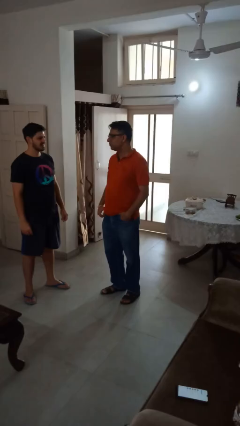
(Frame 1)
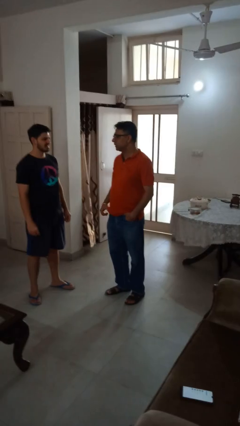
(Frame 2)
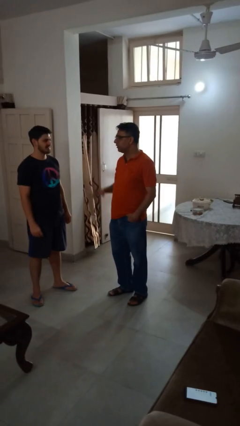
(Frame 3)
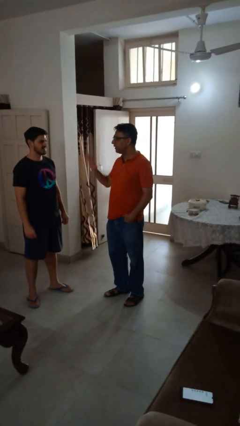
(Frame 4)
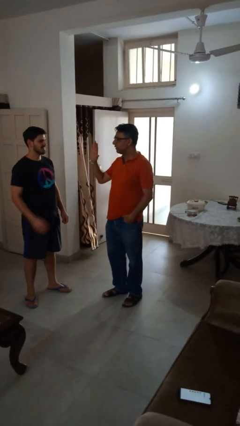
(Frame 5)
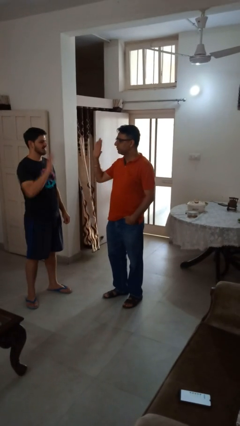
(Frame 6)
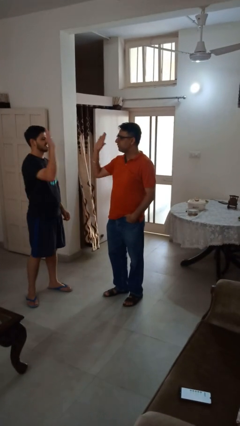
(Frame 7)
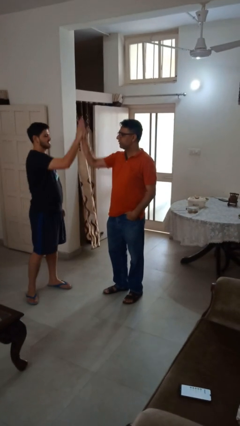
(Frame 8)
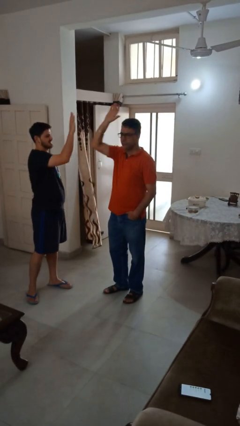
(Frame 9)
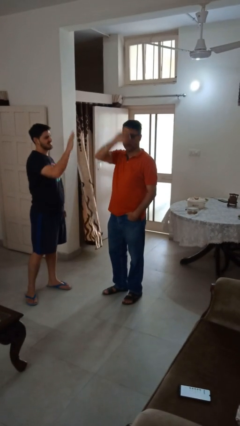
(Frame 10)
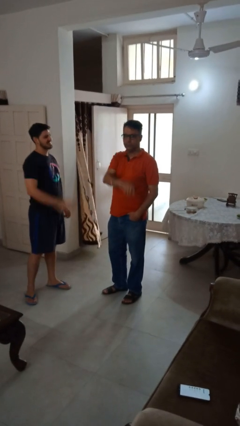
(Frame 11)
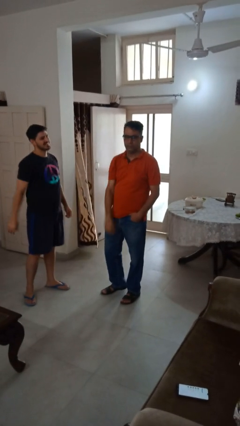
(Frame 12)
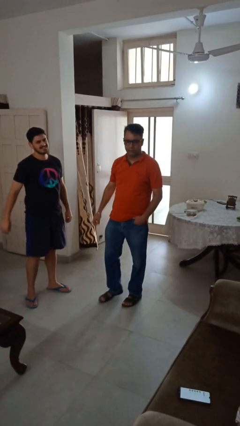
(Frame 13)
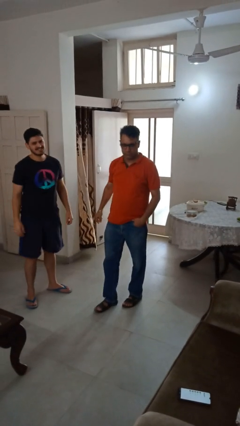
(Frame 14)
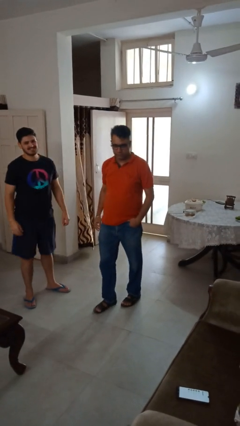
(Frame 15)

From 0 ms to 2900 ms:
person highfives hand

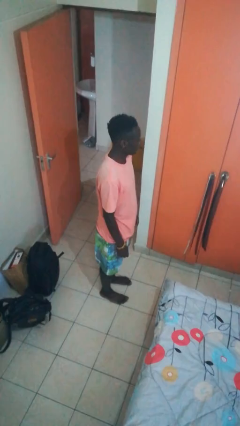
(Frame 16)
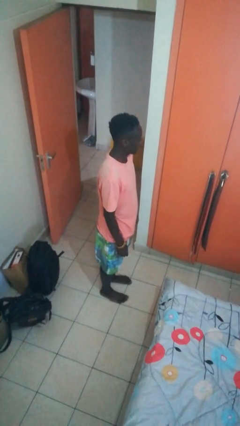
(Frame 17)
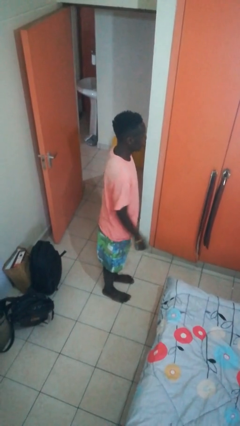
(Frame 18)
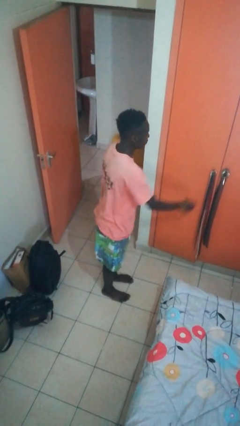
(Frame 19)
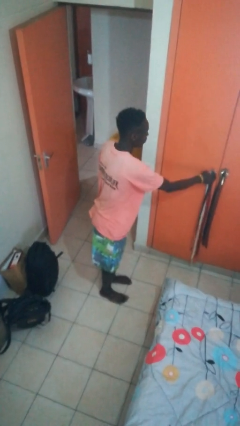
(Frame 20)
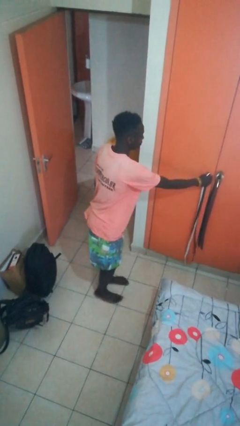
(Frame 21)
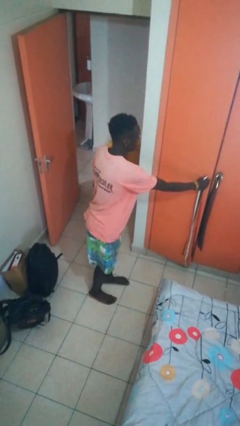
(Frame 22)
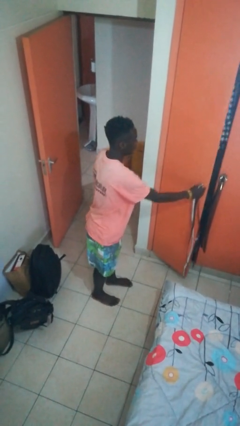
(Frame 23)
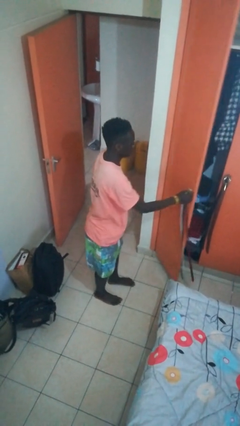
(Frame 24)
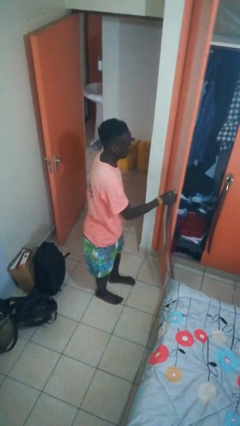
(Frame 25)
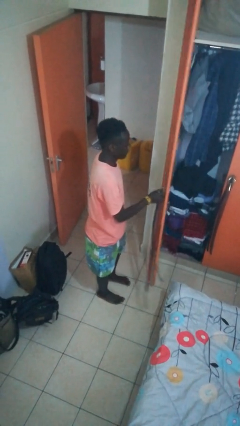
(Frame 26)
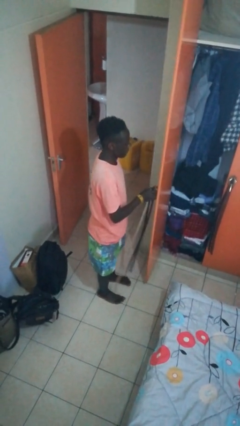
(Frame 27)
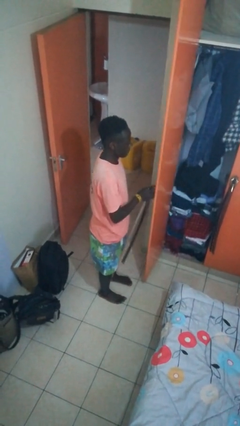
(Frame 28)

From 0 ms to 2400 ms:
person opens closet door

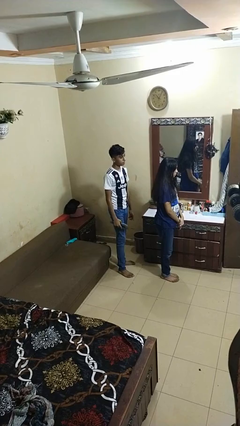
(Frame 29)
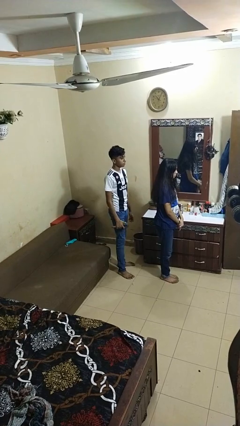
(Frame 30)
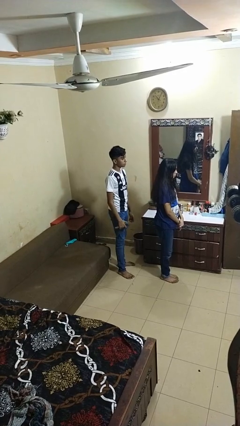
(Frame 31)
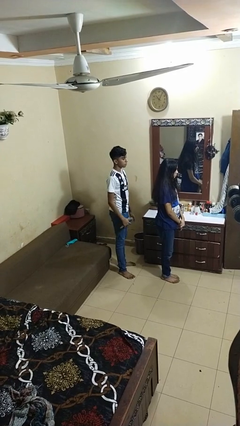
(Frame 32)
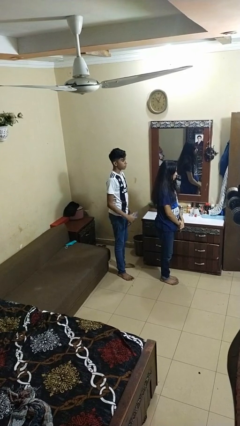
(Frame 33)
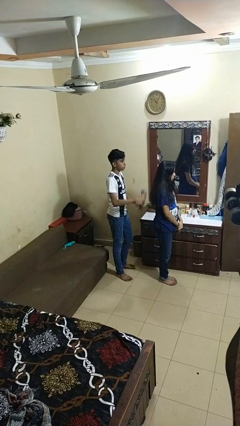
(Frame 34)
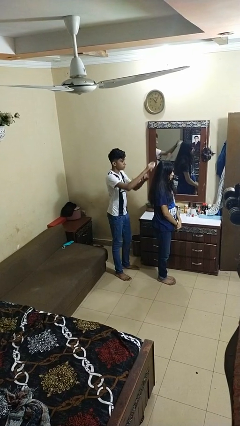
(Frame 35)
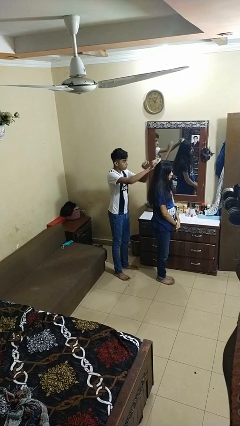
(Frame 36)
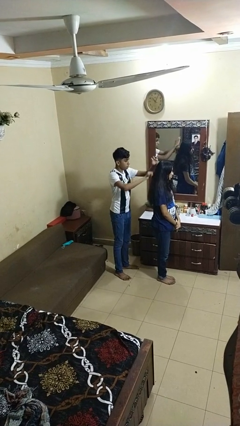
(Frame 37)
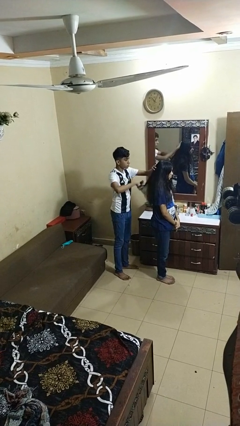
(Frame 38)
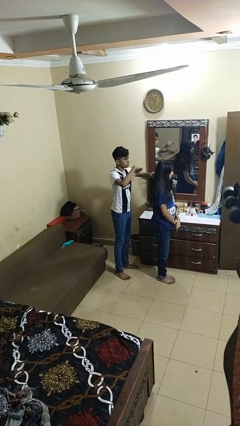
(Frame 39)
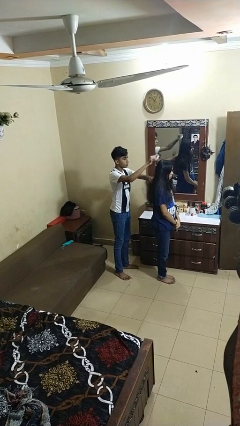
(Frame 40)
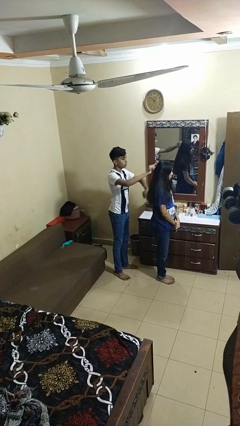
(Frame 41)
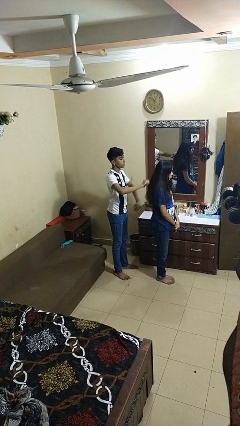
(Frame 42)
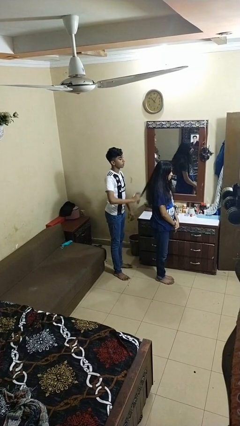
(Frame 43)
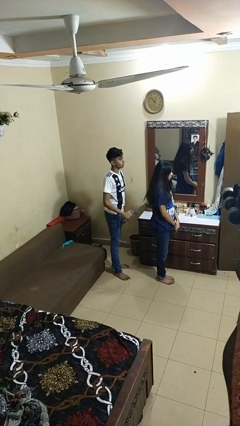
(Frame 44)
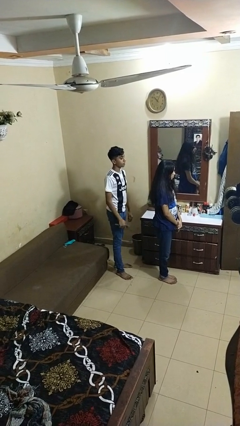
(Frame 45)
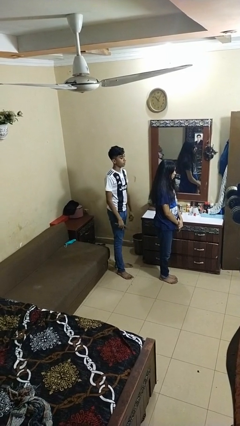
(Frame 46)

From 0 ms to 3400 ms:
person brushes hair of person

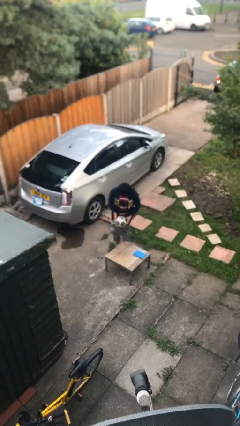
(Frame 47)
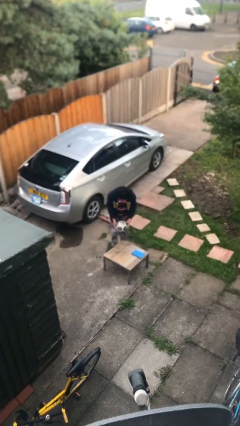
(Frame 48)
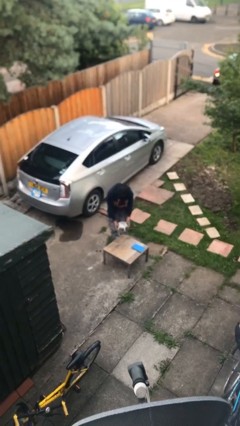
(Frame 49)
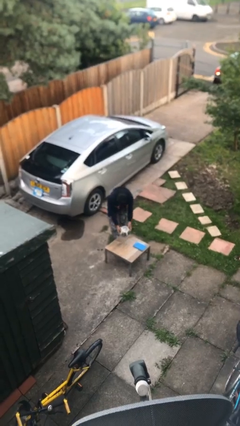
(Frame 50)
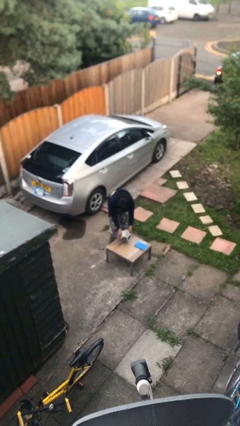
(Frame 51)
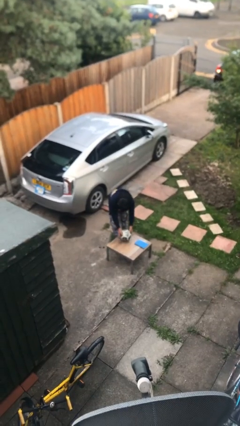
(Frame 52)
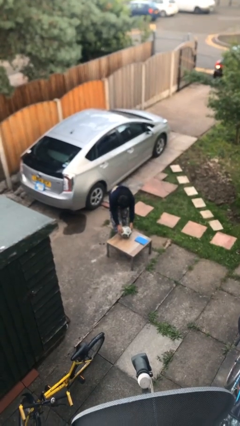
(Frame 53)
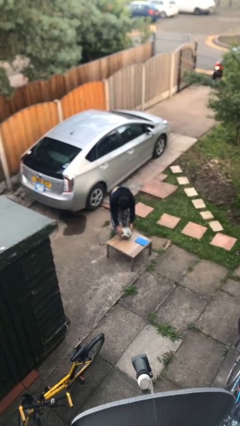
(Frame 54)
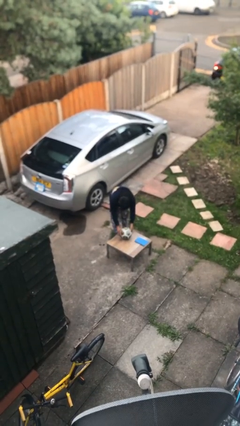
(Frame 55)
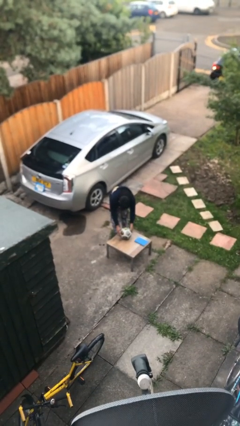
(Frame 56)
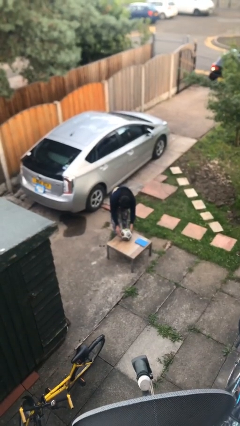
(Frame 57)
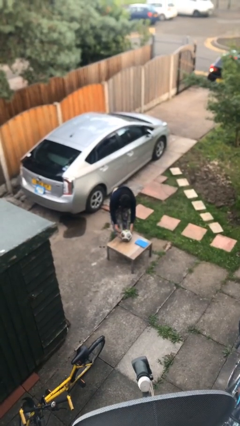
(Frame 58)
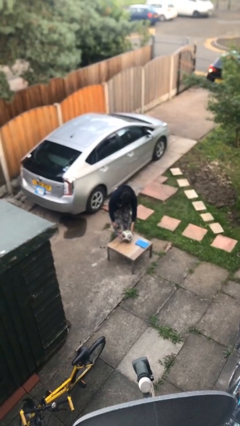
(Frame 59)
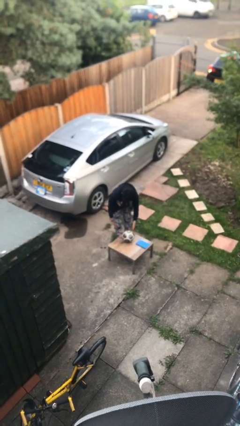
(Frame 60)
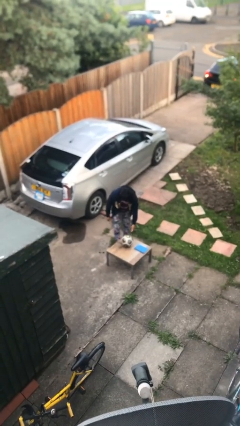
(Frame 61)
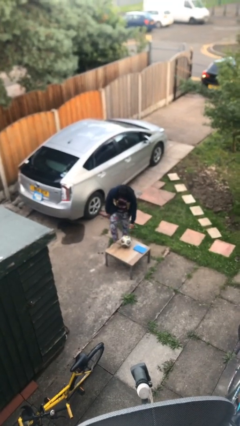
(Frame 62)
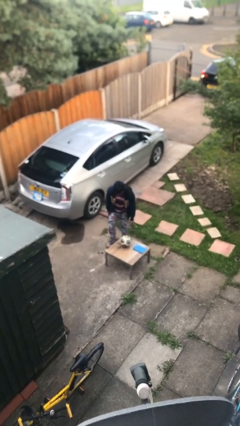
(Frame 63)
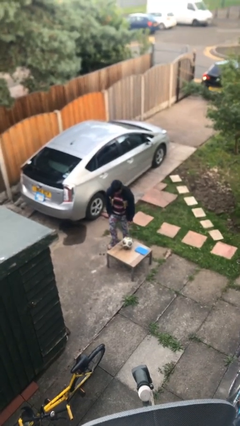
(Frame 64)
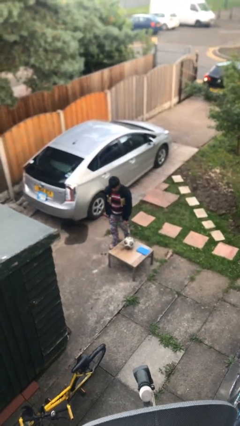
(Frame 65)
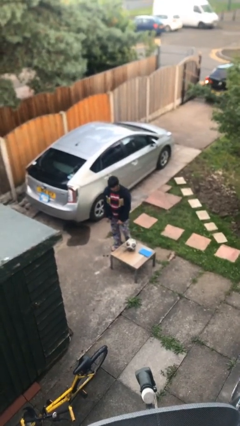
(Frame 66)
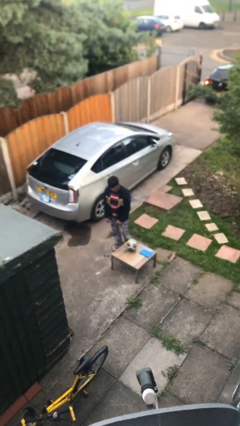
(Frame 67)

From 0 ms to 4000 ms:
person puts down object on table

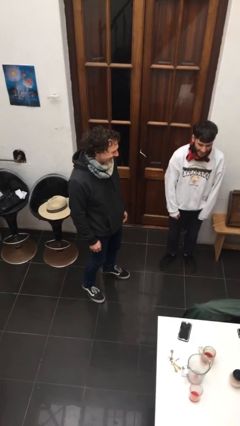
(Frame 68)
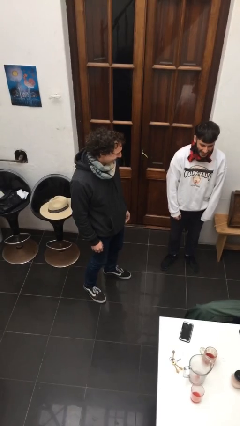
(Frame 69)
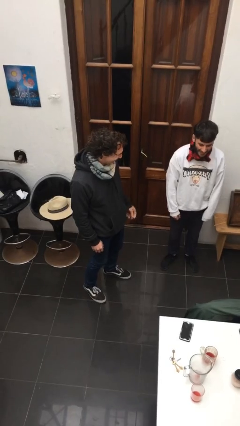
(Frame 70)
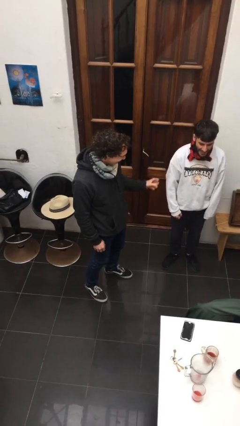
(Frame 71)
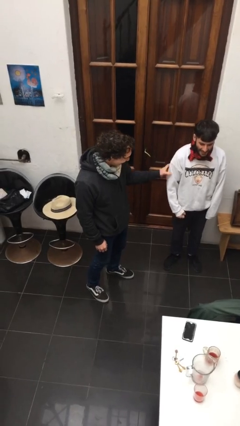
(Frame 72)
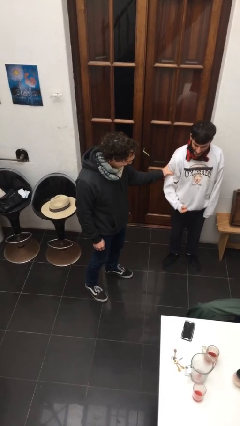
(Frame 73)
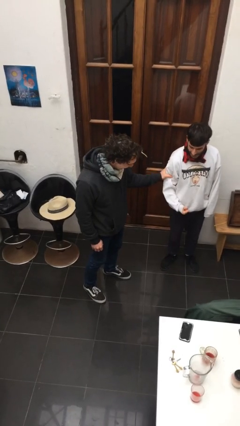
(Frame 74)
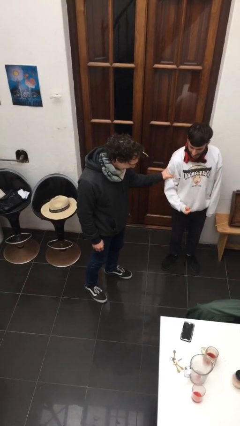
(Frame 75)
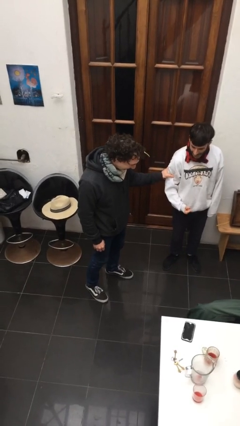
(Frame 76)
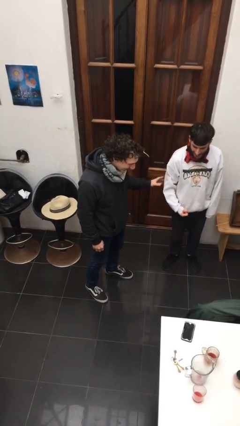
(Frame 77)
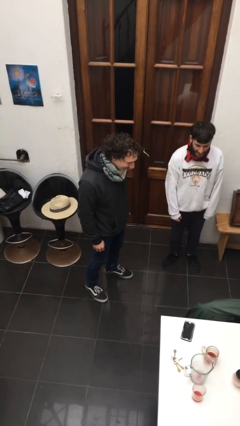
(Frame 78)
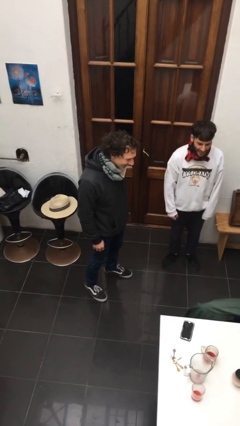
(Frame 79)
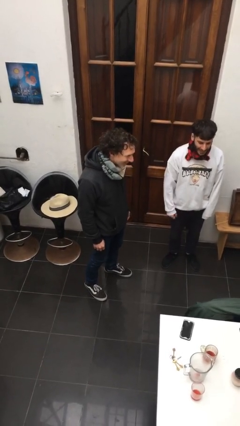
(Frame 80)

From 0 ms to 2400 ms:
person grabs person by bicep

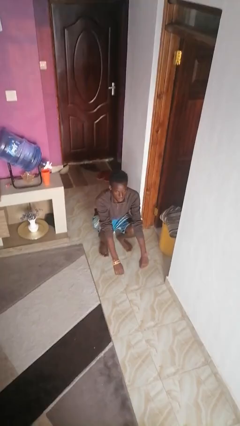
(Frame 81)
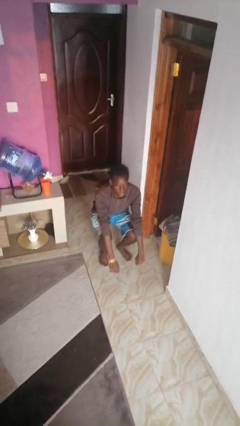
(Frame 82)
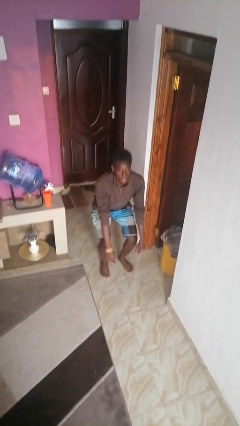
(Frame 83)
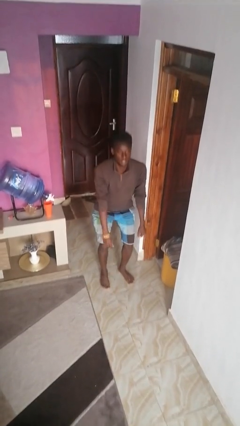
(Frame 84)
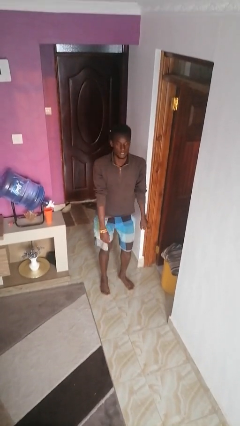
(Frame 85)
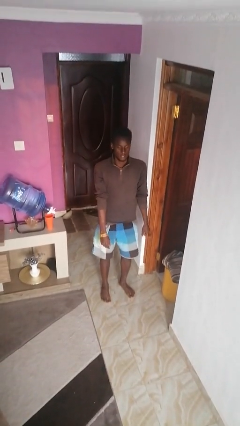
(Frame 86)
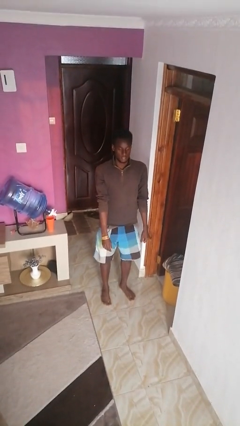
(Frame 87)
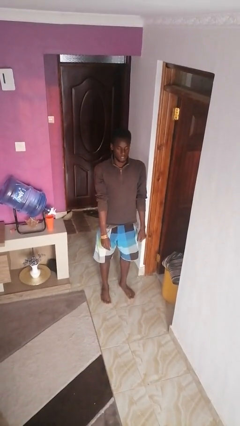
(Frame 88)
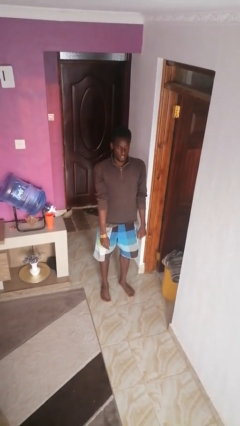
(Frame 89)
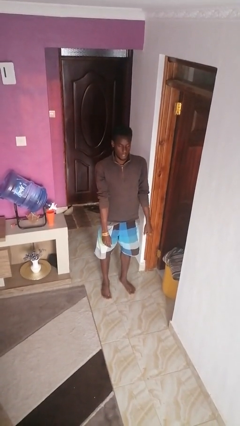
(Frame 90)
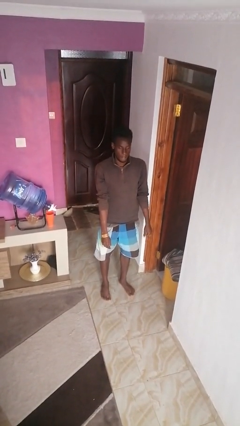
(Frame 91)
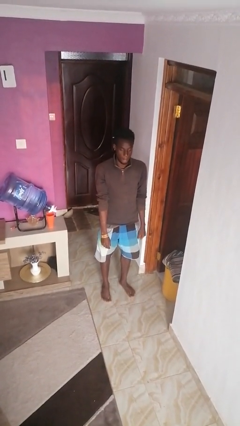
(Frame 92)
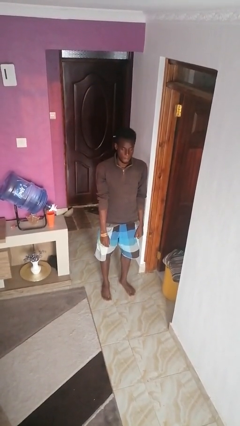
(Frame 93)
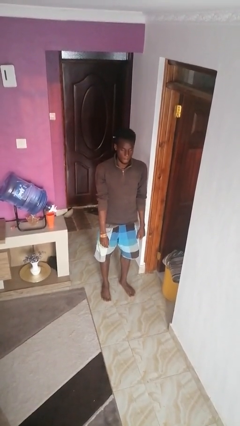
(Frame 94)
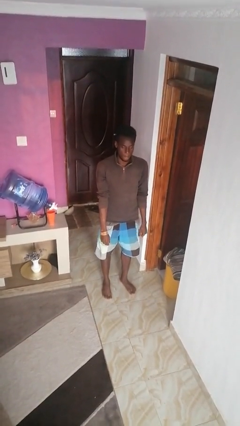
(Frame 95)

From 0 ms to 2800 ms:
person stands up
